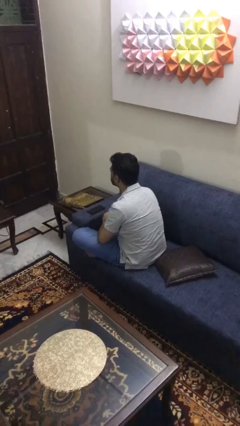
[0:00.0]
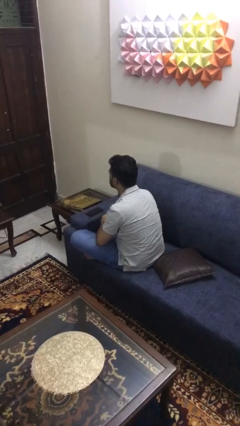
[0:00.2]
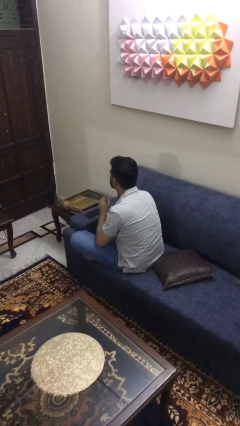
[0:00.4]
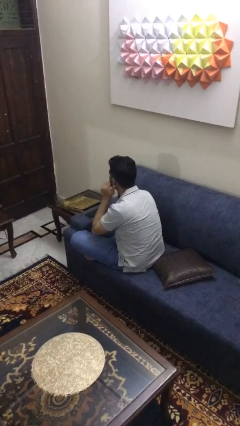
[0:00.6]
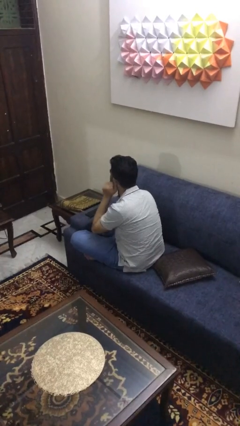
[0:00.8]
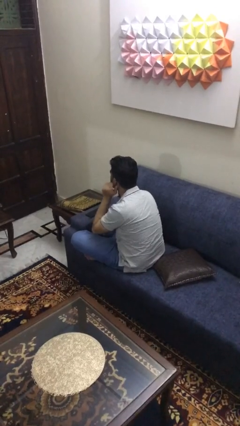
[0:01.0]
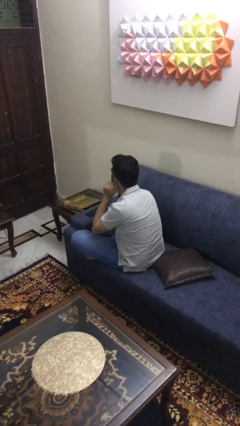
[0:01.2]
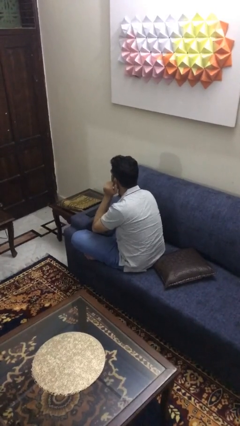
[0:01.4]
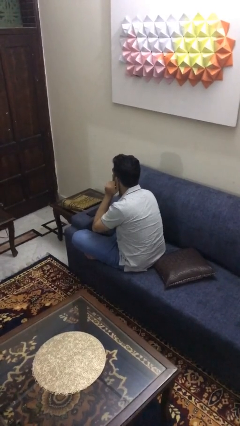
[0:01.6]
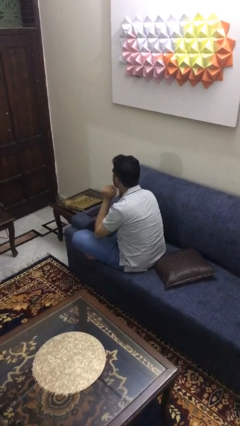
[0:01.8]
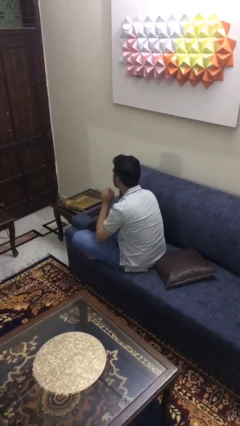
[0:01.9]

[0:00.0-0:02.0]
person touches earlobe

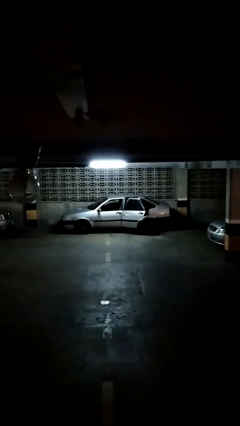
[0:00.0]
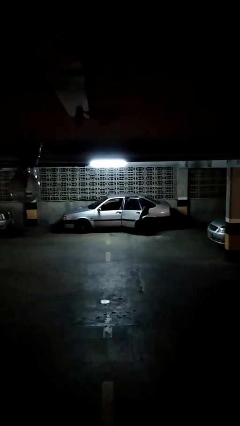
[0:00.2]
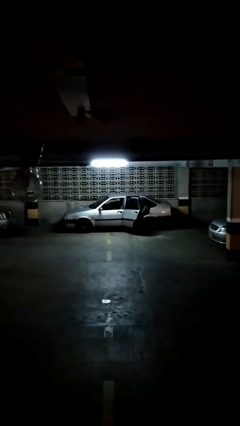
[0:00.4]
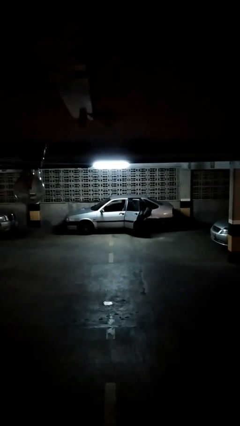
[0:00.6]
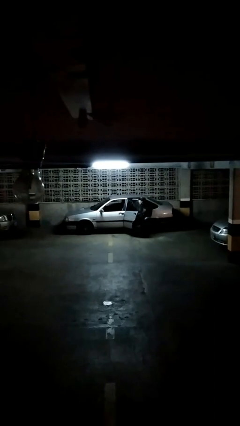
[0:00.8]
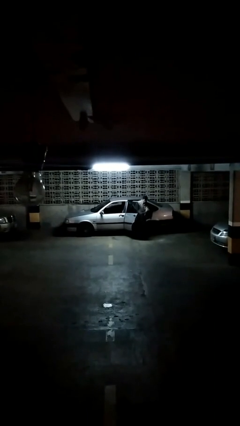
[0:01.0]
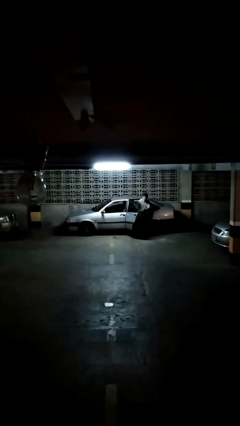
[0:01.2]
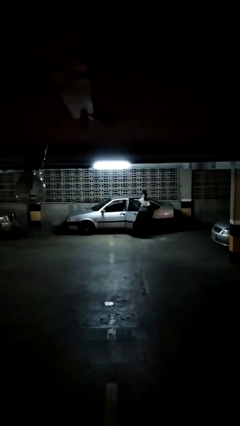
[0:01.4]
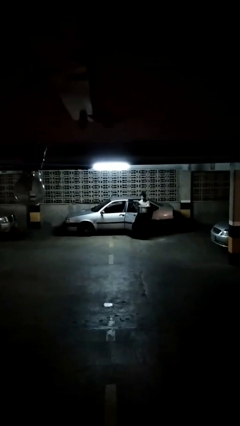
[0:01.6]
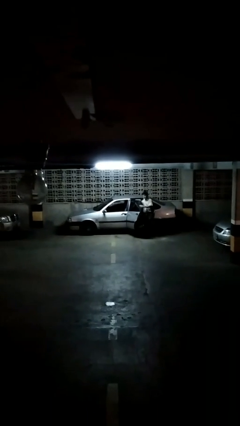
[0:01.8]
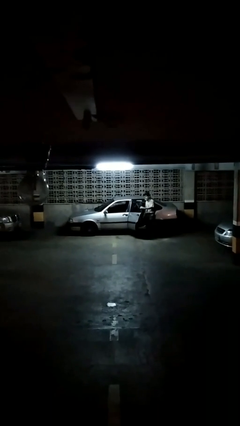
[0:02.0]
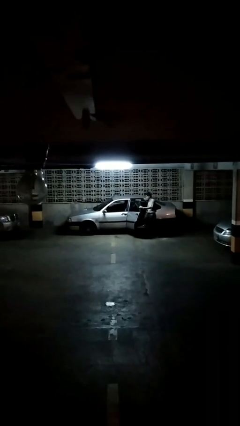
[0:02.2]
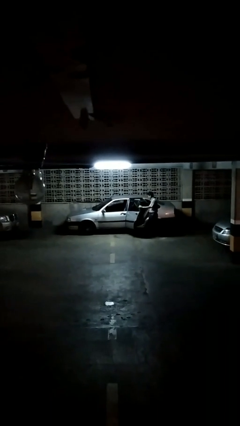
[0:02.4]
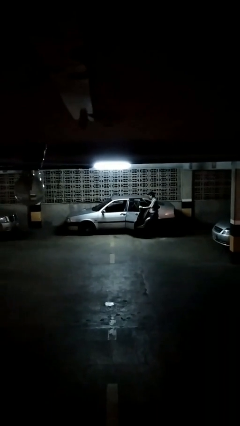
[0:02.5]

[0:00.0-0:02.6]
car drops off person

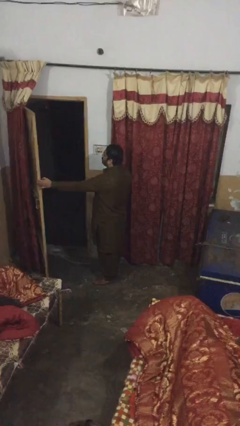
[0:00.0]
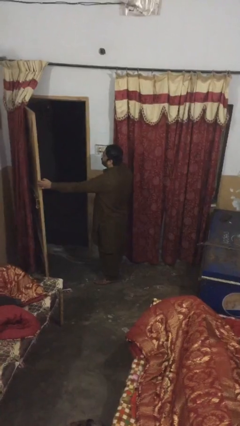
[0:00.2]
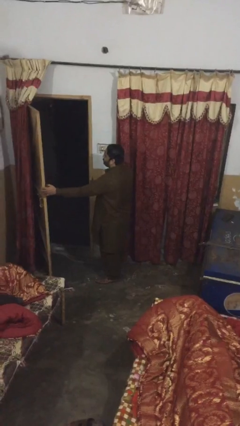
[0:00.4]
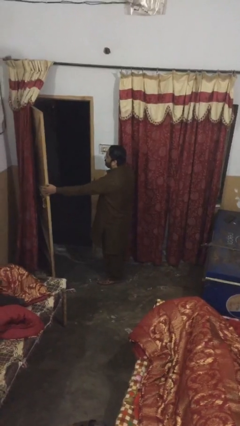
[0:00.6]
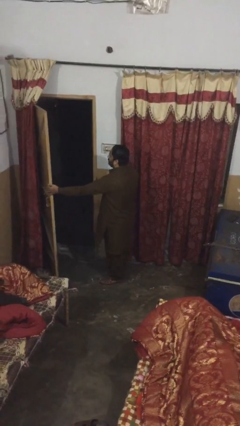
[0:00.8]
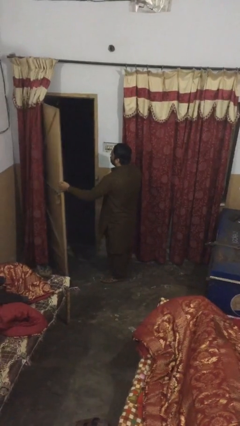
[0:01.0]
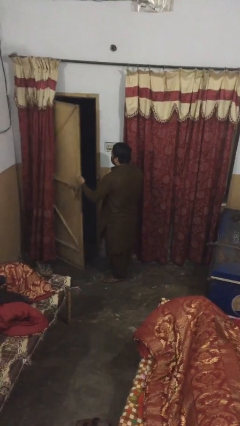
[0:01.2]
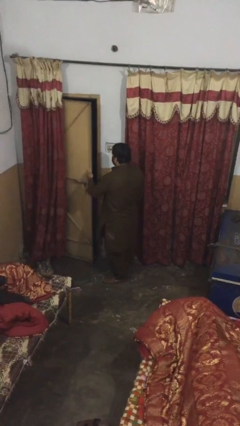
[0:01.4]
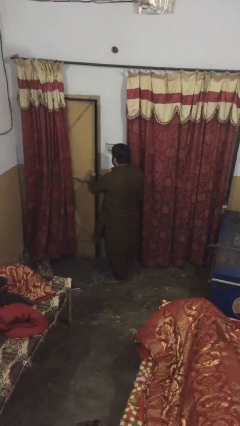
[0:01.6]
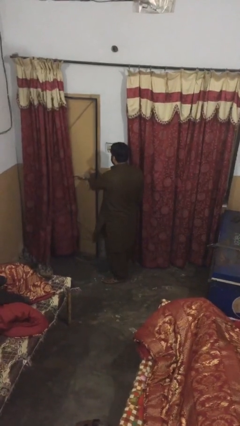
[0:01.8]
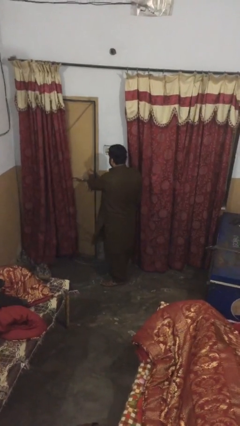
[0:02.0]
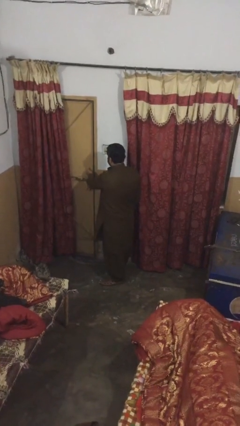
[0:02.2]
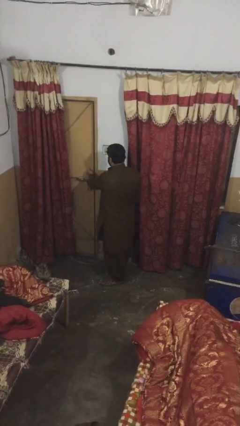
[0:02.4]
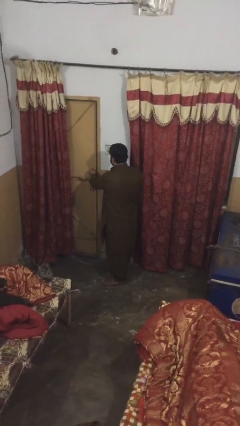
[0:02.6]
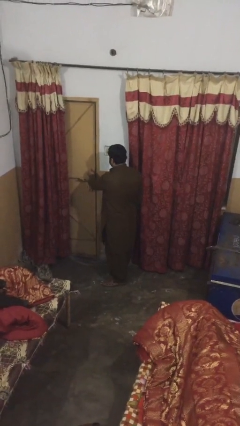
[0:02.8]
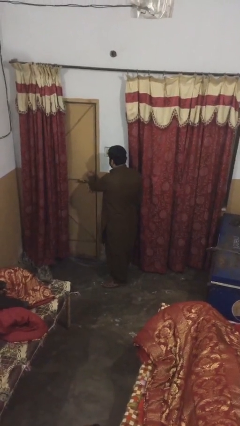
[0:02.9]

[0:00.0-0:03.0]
person closes facility door

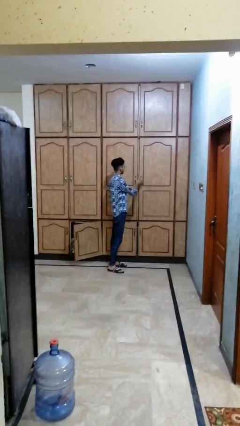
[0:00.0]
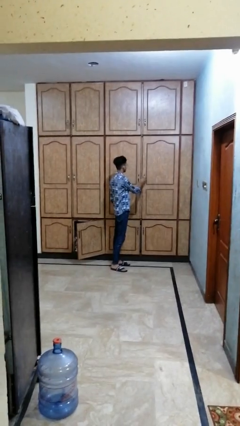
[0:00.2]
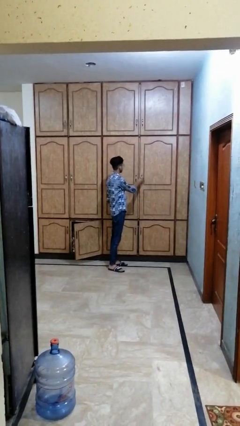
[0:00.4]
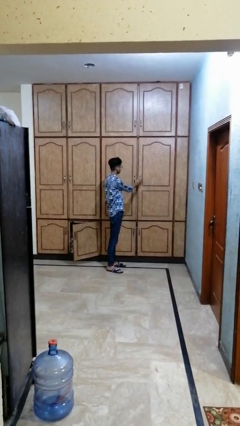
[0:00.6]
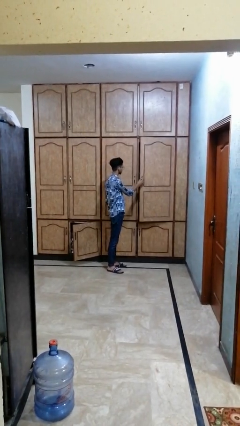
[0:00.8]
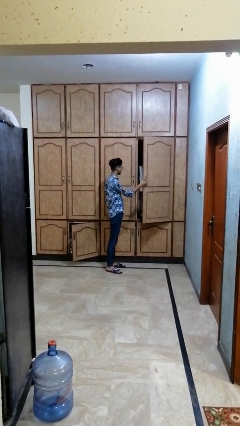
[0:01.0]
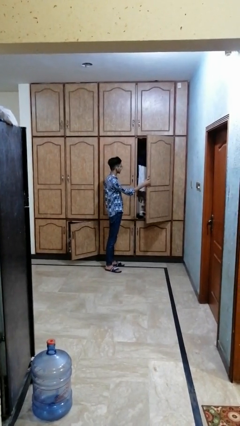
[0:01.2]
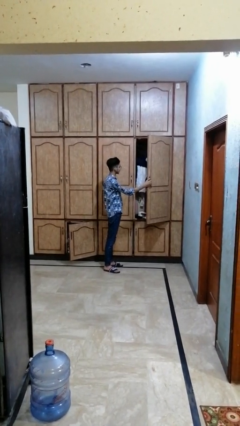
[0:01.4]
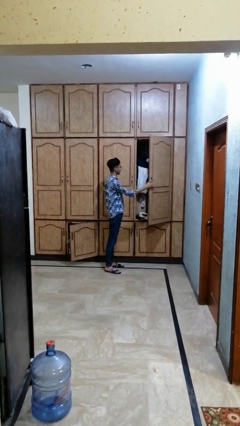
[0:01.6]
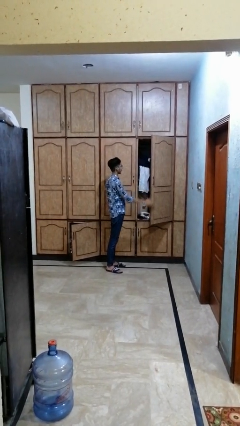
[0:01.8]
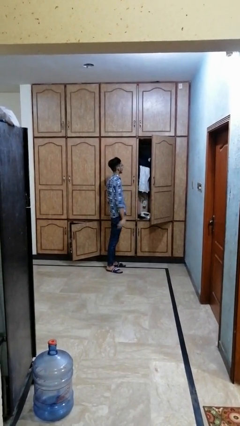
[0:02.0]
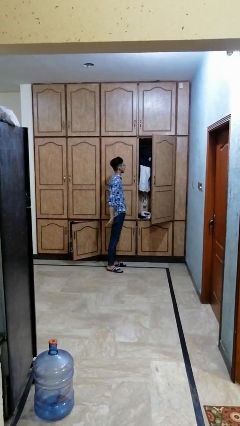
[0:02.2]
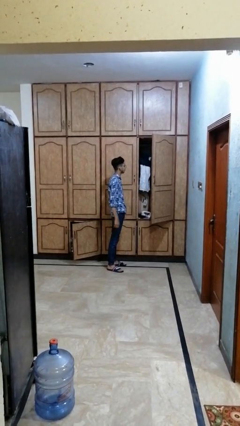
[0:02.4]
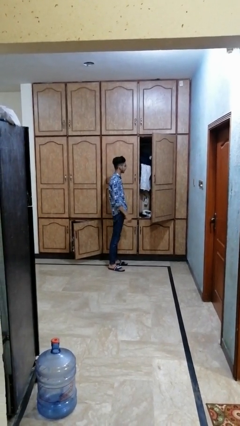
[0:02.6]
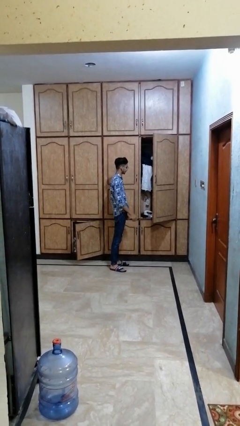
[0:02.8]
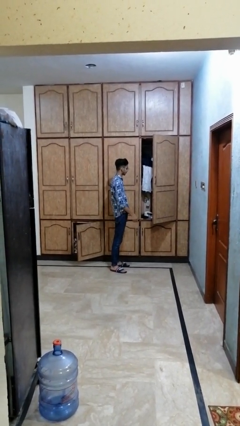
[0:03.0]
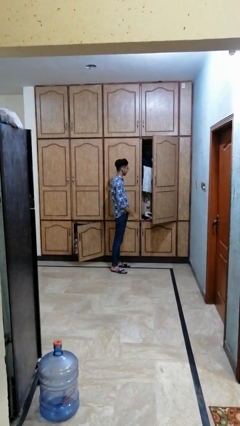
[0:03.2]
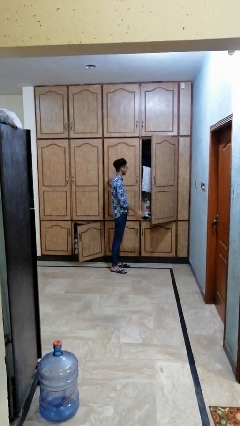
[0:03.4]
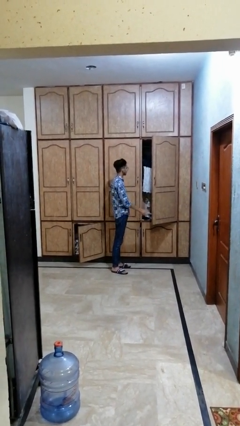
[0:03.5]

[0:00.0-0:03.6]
person opens dresser drawer

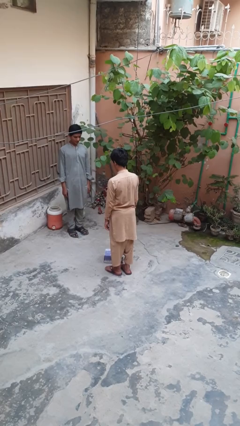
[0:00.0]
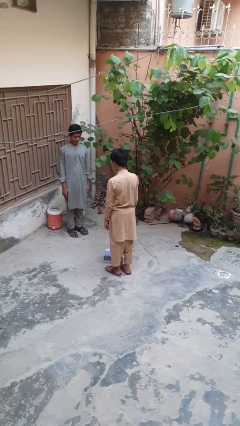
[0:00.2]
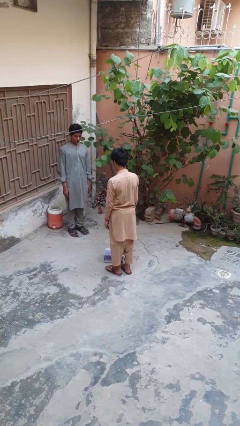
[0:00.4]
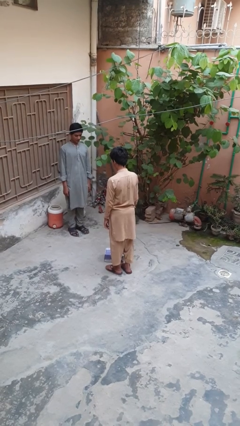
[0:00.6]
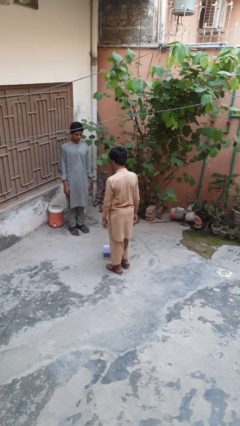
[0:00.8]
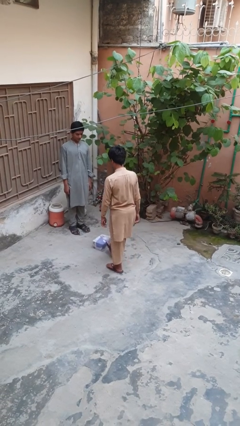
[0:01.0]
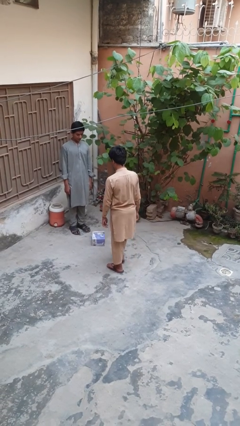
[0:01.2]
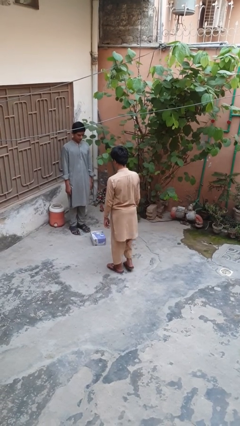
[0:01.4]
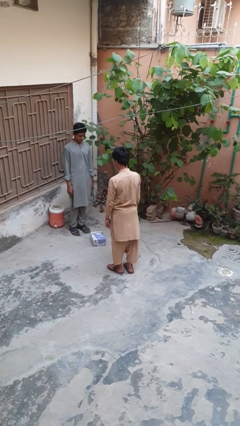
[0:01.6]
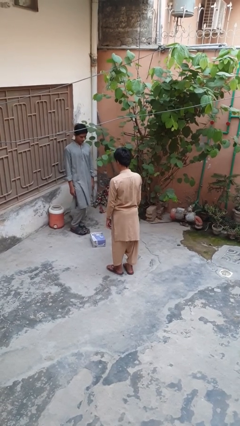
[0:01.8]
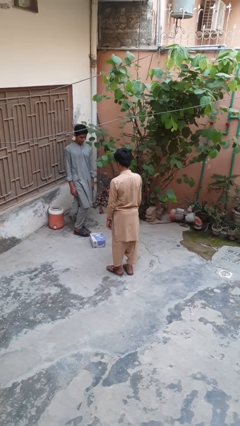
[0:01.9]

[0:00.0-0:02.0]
person kicks object to person

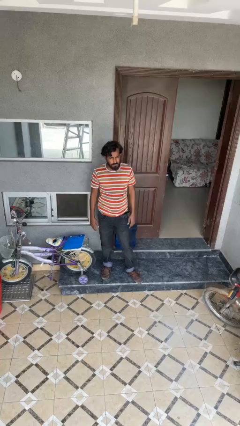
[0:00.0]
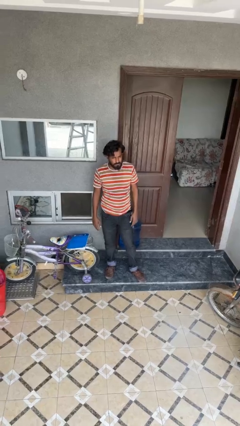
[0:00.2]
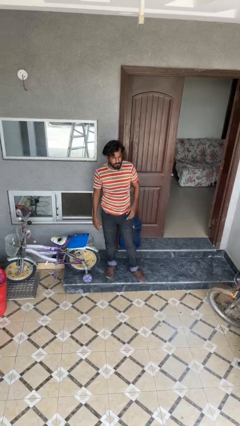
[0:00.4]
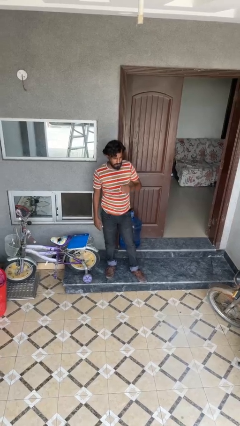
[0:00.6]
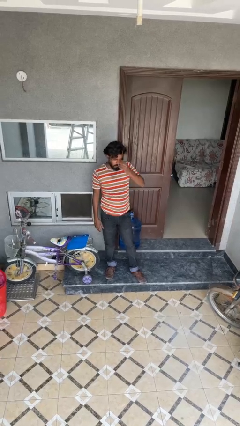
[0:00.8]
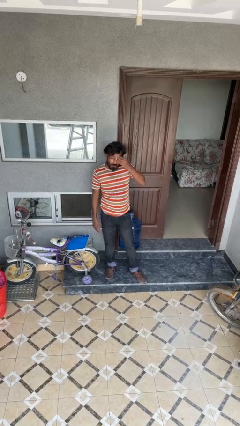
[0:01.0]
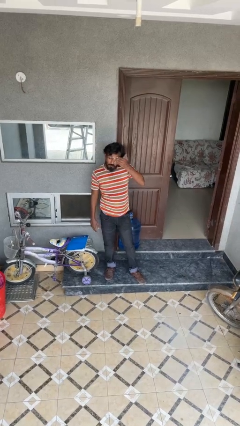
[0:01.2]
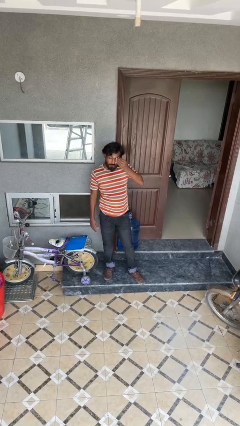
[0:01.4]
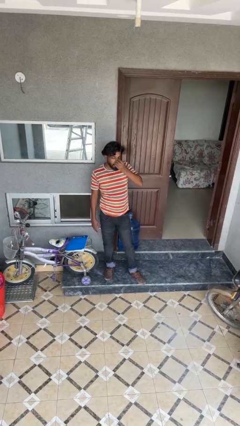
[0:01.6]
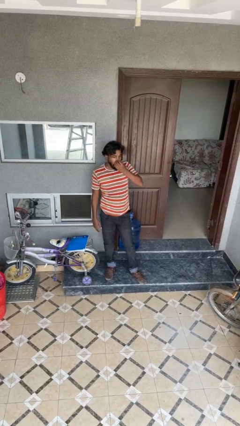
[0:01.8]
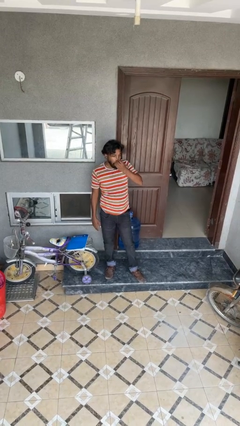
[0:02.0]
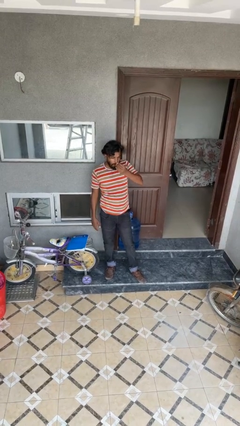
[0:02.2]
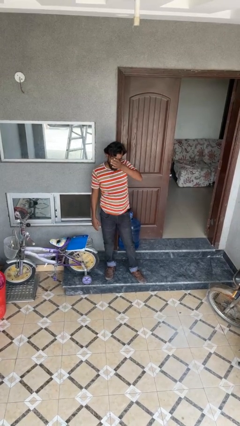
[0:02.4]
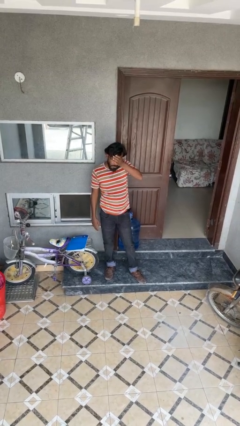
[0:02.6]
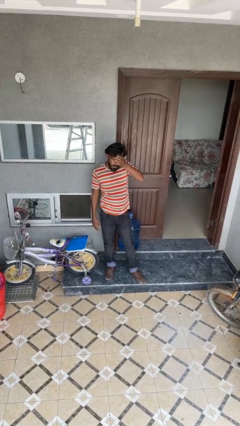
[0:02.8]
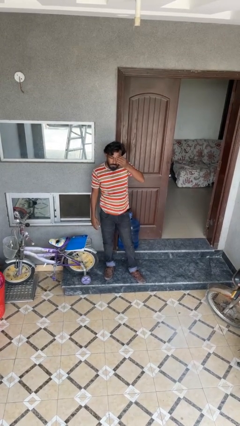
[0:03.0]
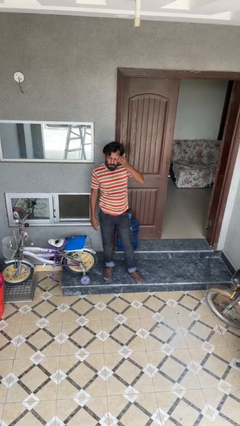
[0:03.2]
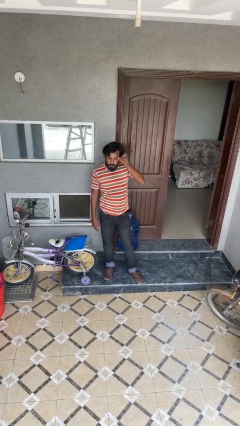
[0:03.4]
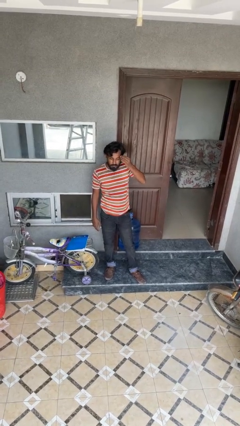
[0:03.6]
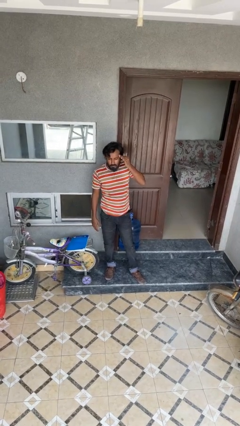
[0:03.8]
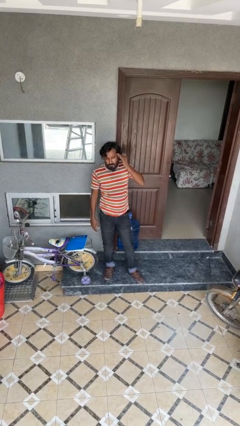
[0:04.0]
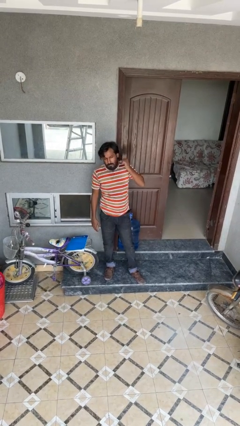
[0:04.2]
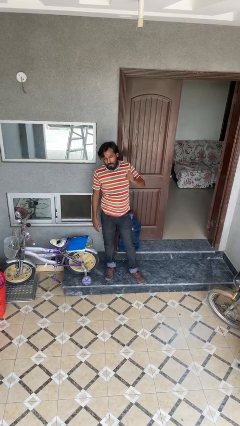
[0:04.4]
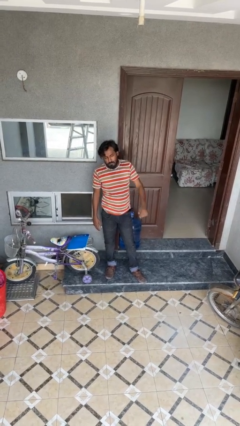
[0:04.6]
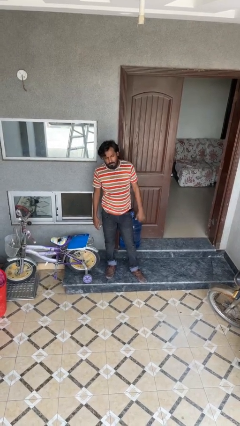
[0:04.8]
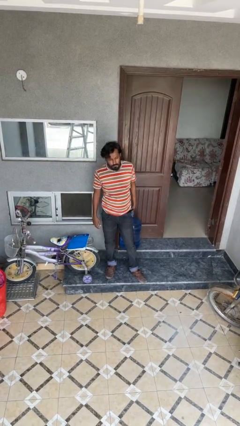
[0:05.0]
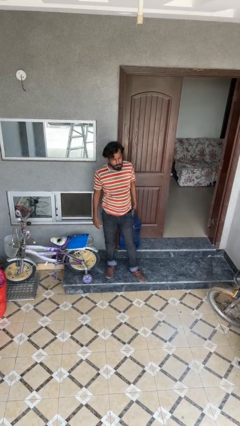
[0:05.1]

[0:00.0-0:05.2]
person scratches face
